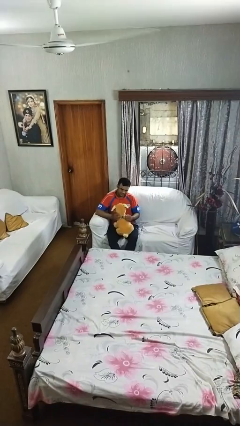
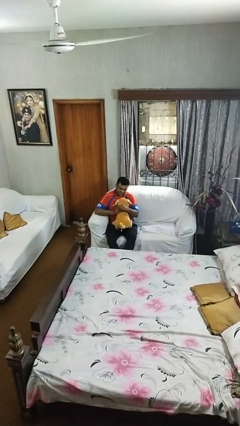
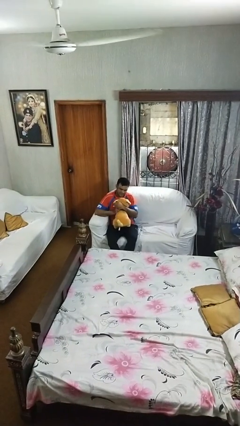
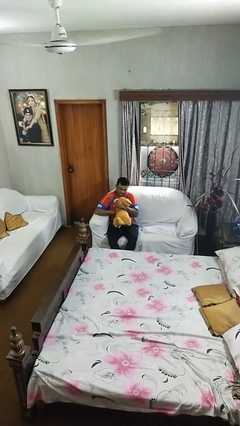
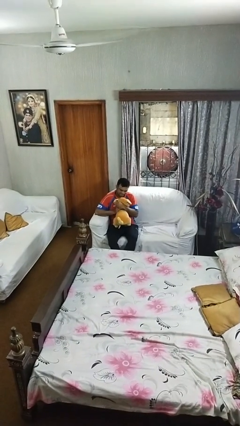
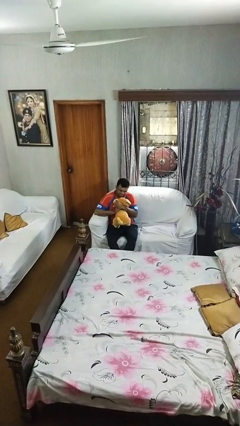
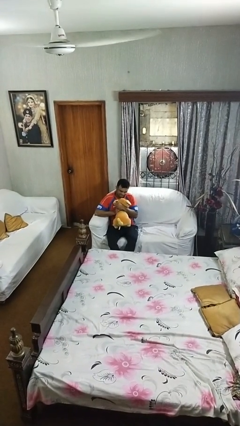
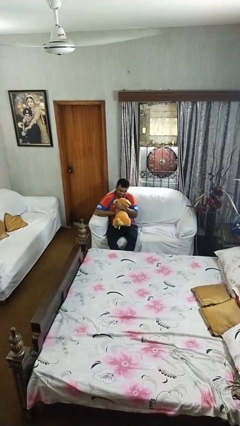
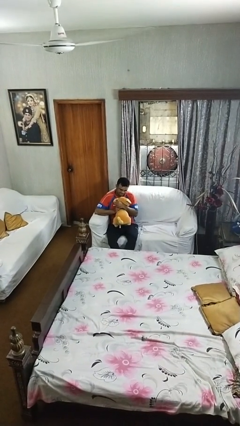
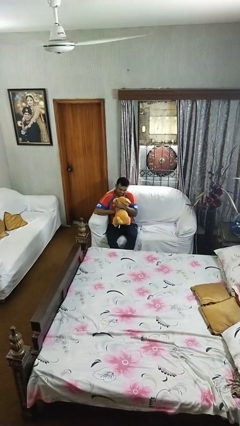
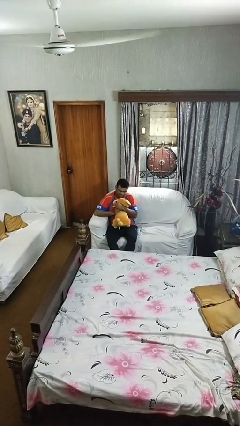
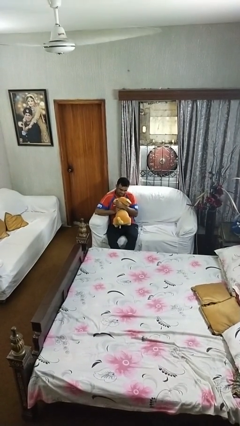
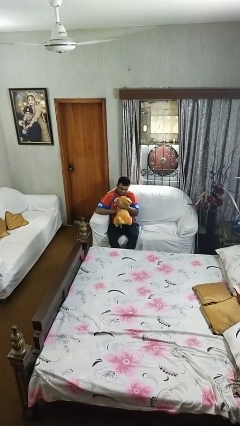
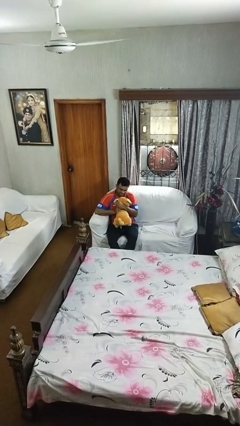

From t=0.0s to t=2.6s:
person hugs stuffed animal

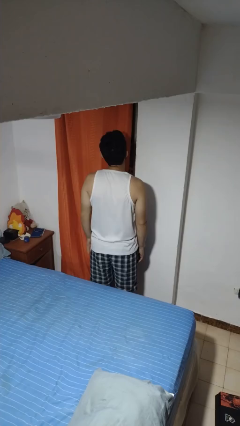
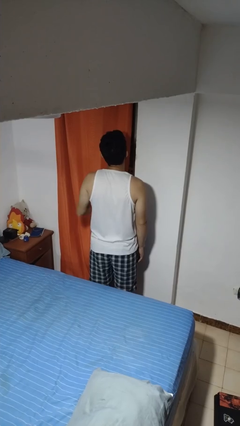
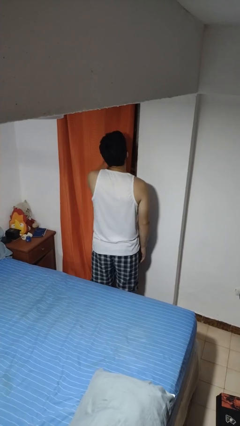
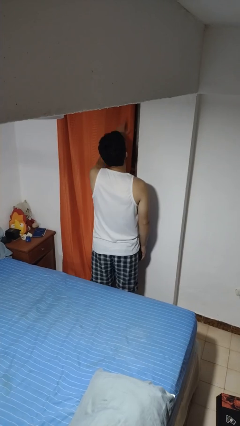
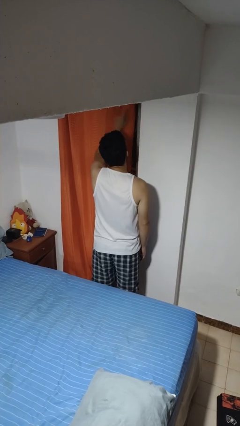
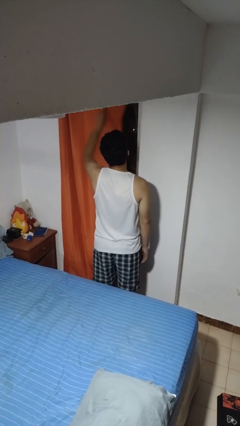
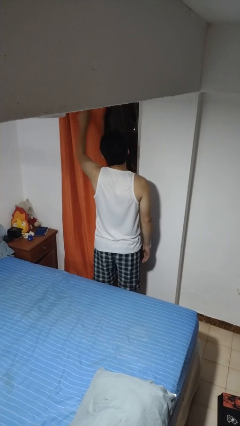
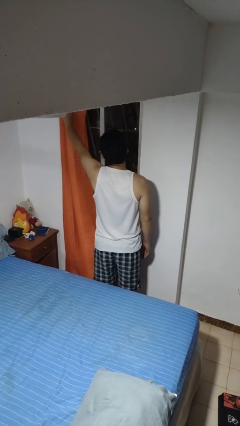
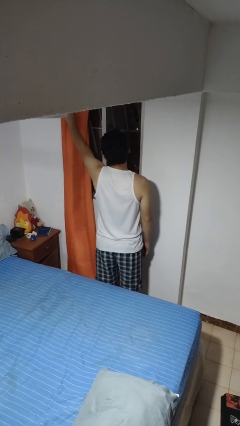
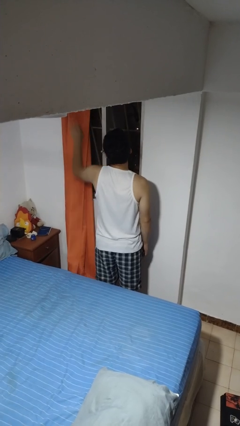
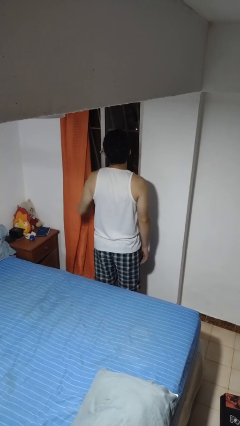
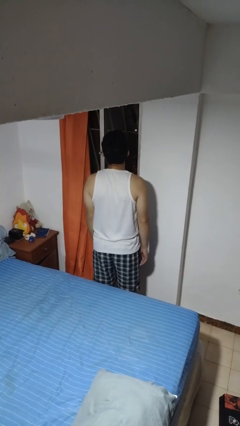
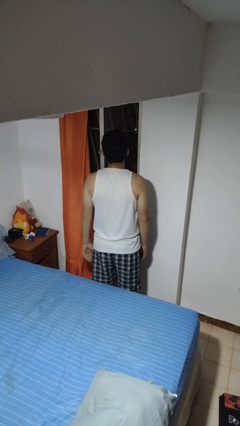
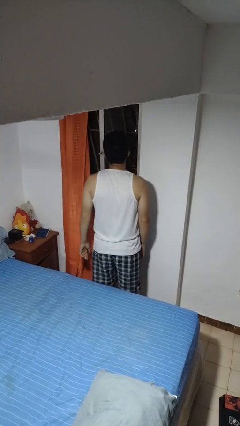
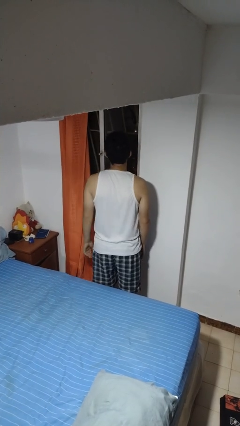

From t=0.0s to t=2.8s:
person opens curtains

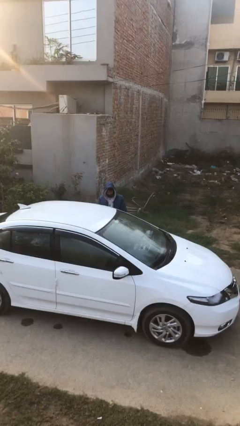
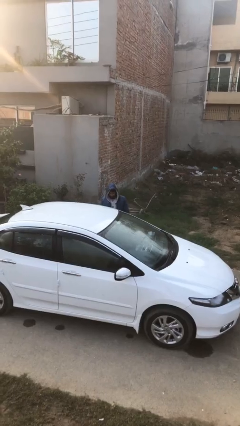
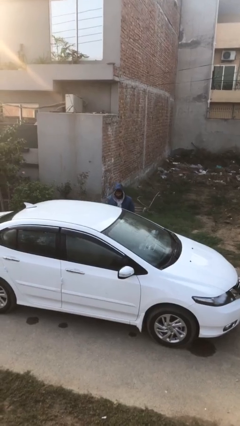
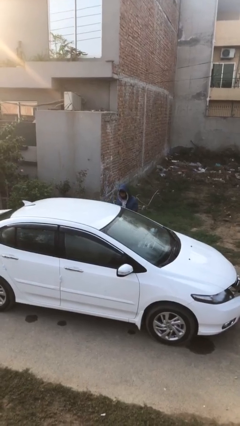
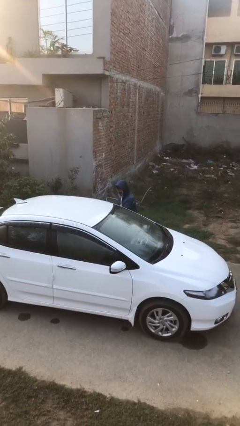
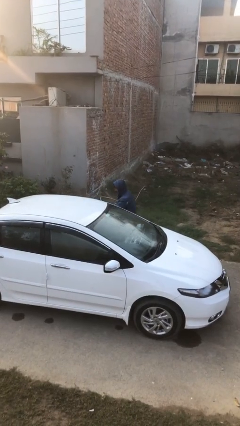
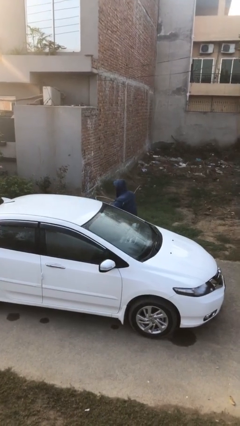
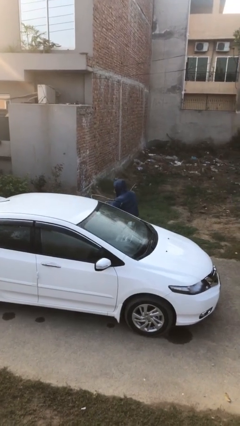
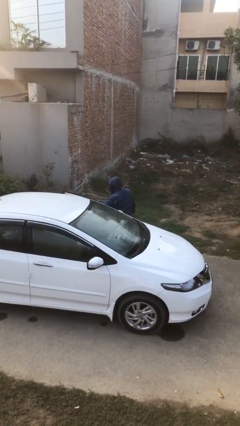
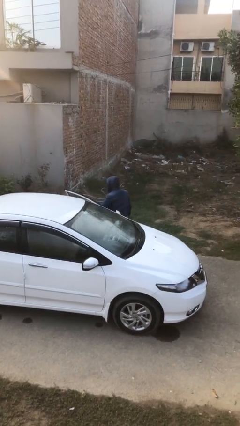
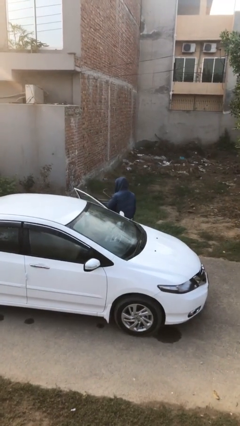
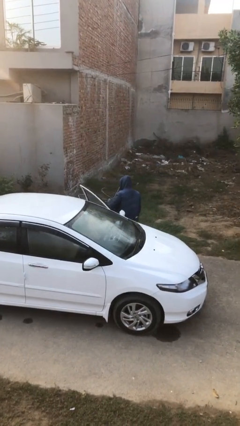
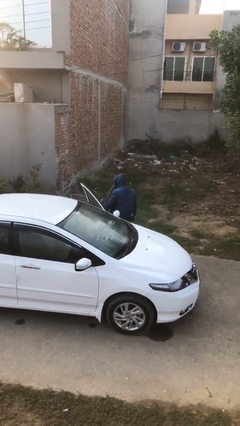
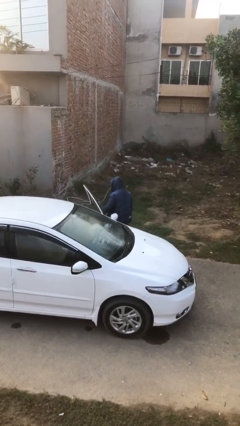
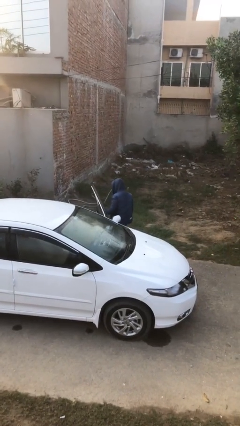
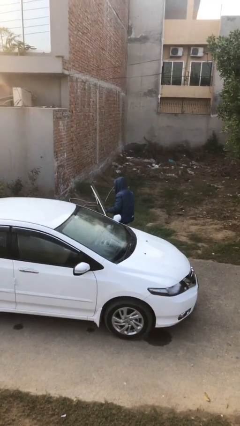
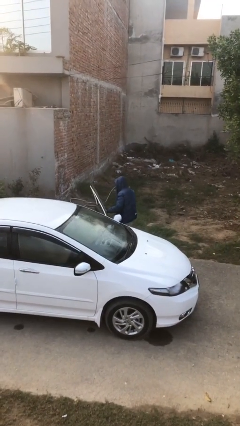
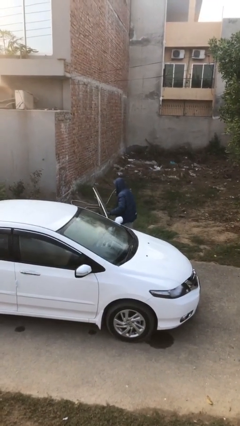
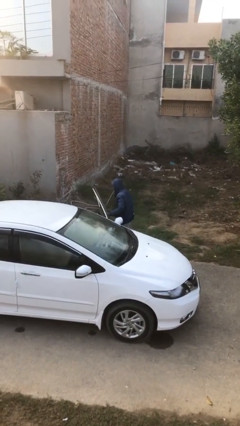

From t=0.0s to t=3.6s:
person opens car door

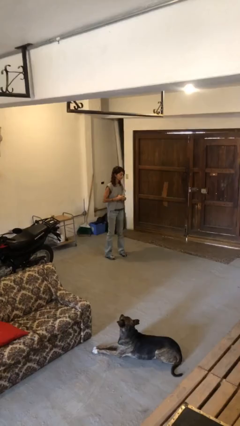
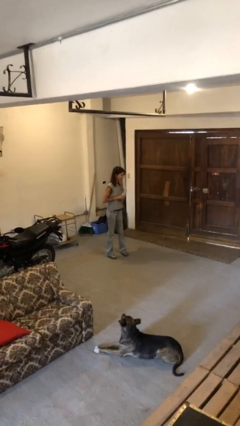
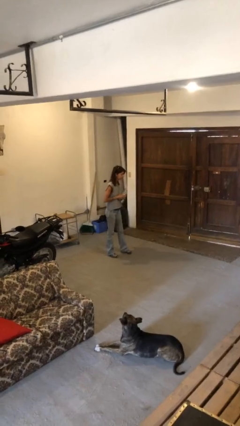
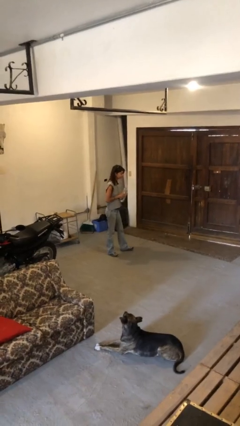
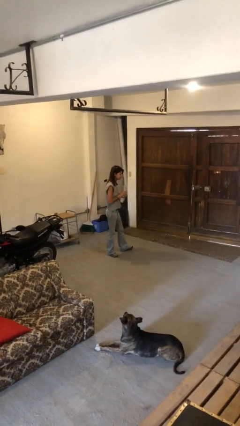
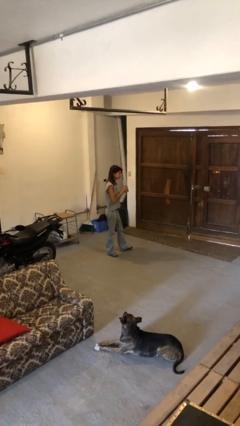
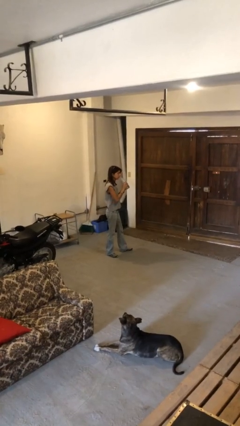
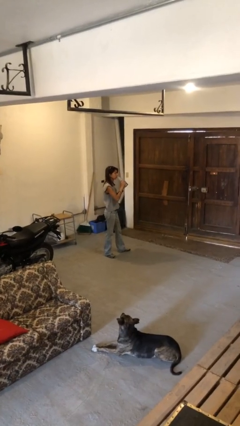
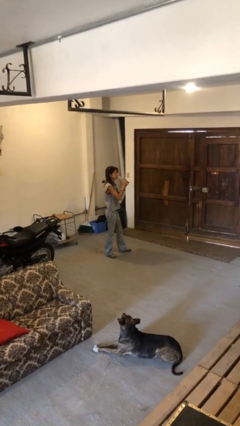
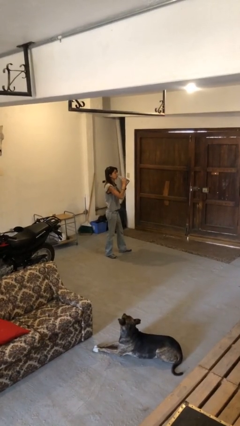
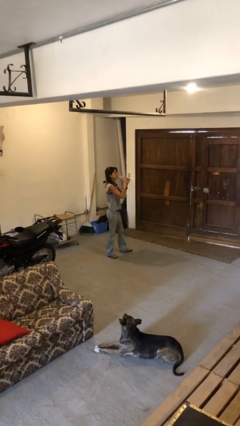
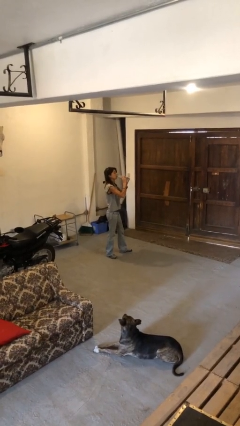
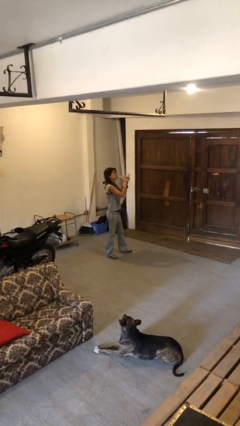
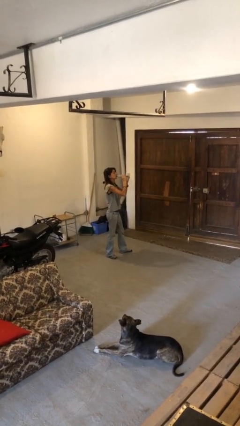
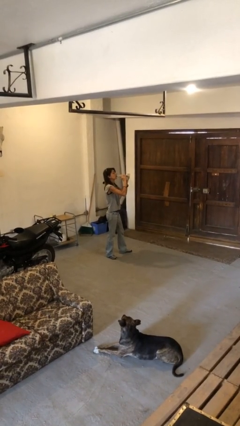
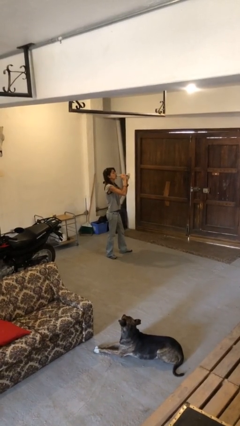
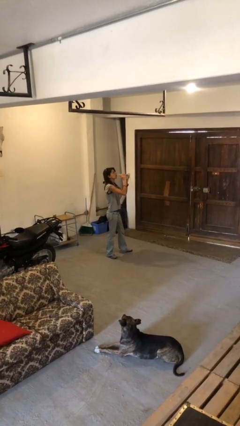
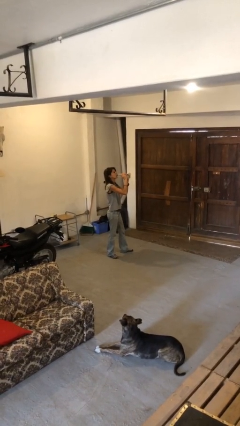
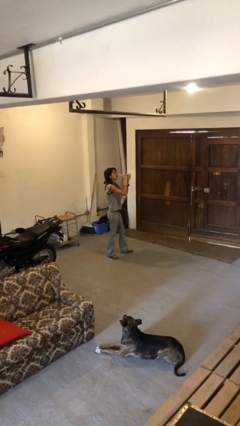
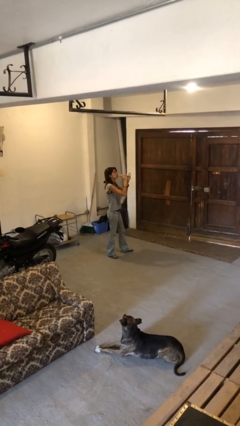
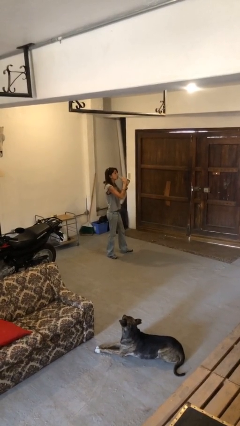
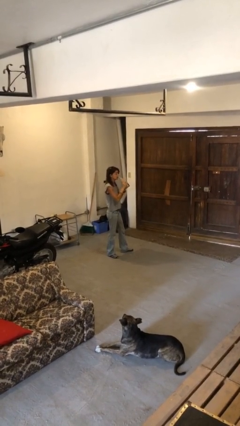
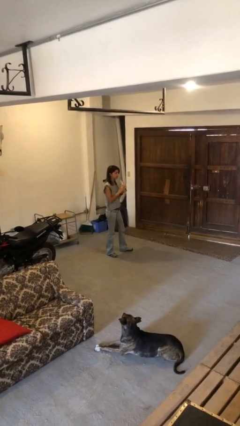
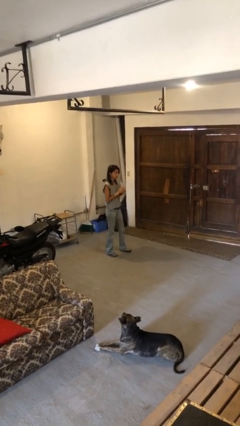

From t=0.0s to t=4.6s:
person drinks from bottle

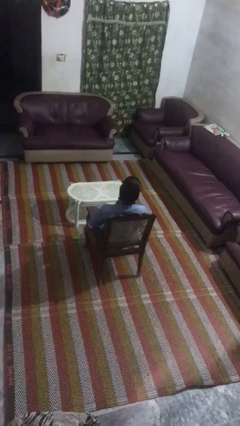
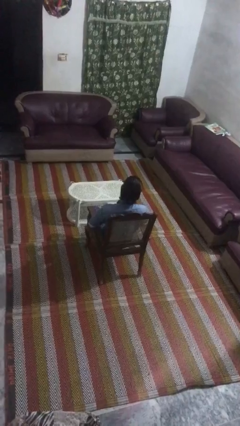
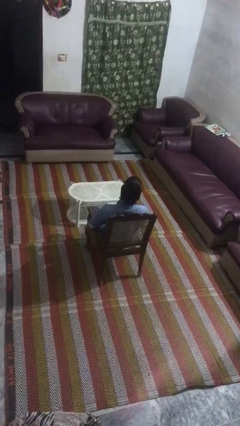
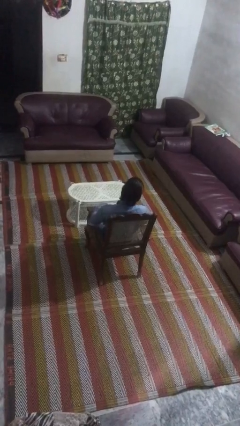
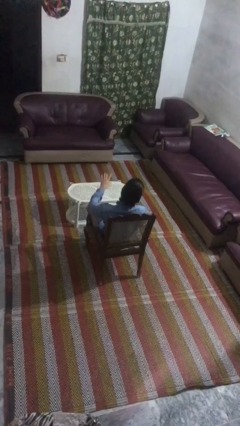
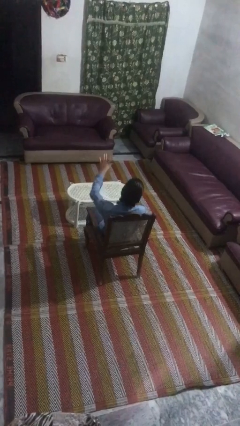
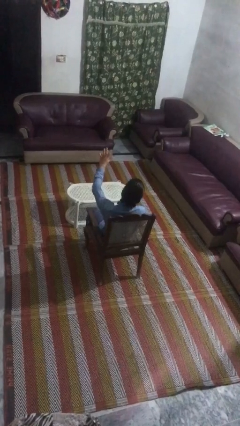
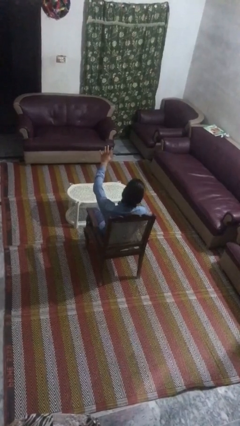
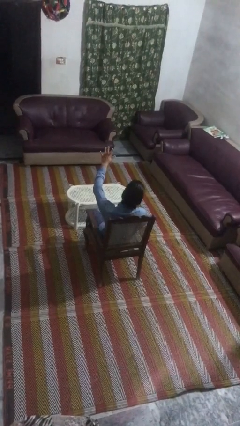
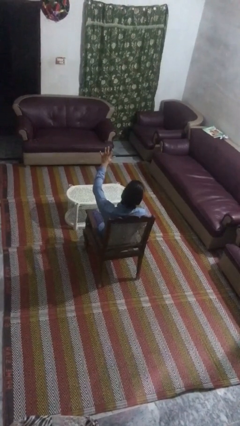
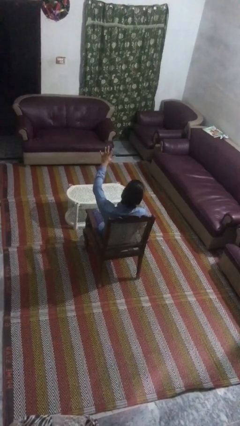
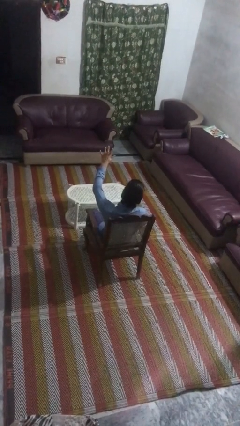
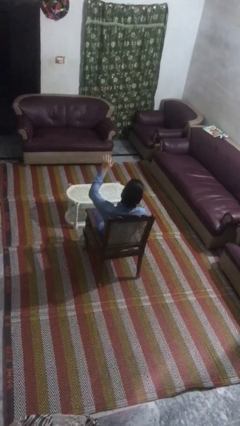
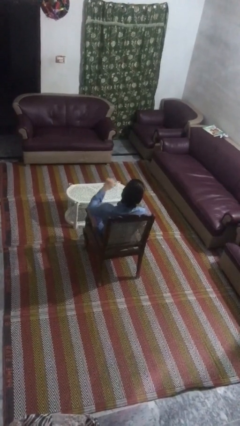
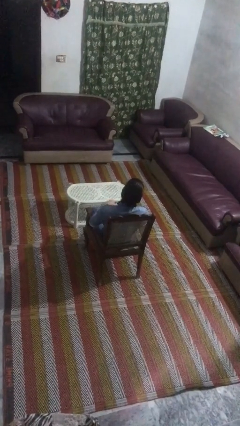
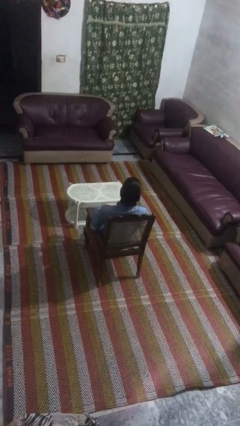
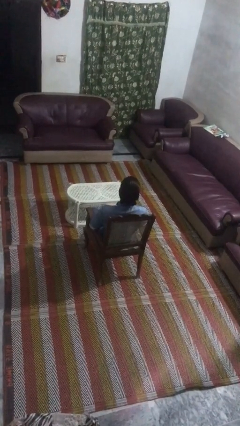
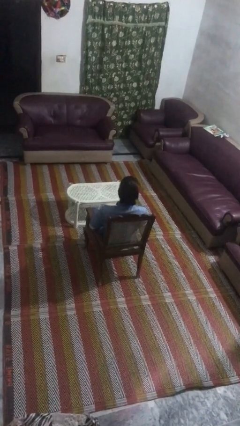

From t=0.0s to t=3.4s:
person gestures number five

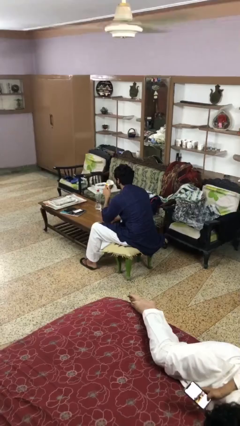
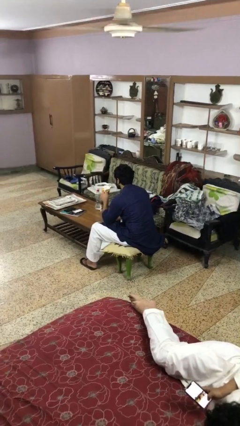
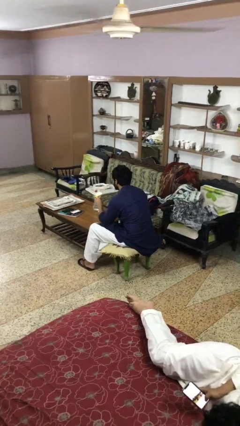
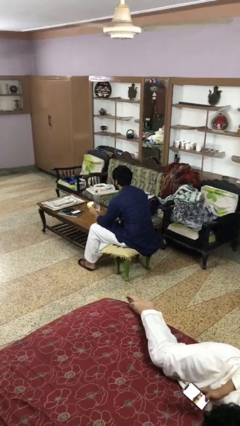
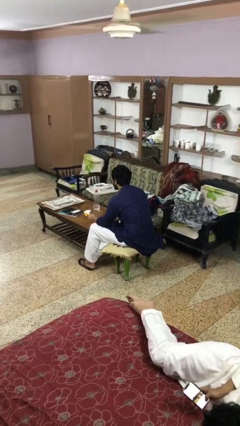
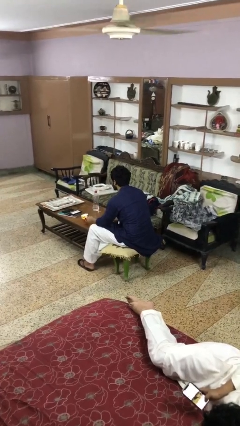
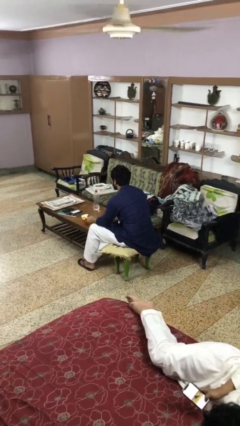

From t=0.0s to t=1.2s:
person puts down object on table
